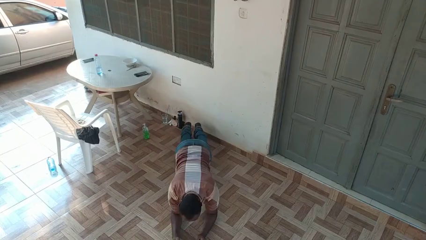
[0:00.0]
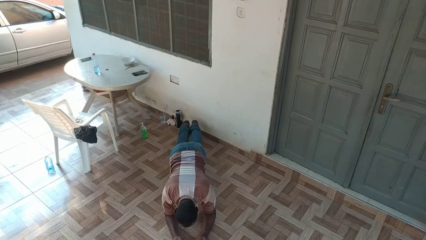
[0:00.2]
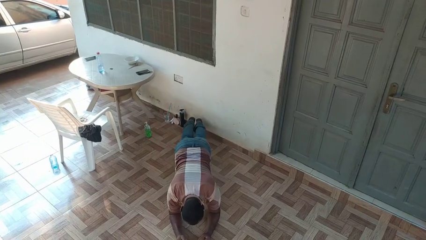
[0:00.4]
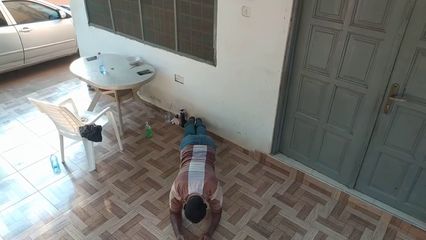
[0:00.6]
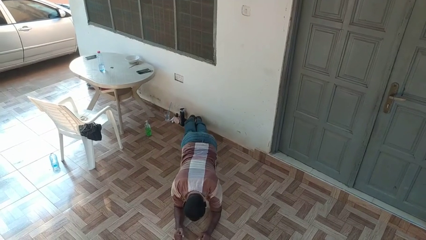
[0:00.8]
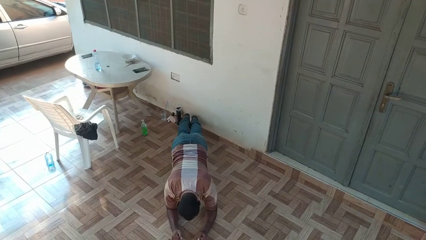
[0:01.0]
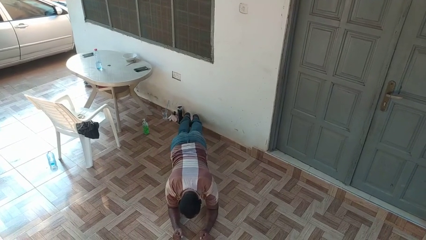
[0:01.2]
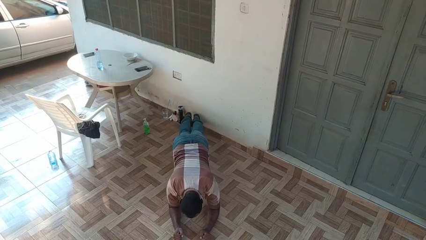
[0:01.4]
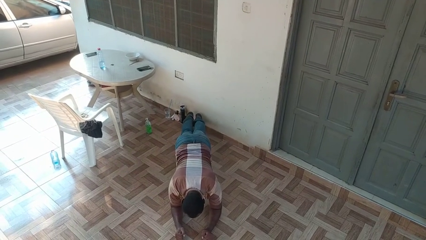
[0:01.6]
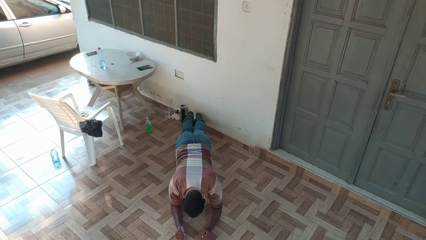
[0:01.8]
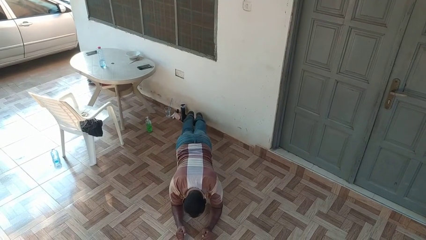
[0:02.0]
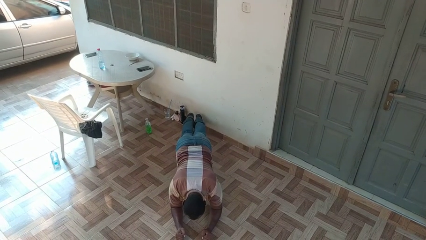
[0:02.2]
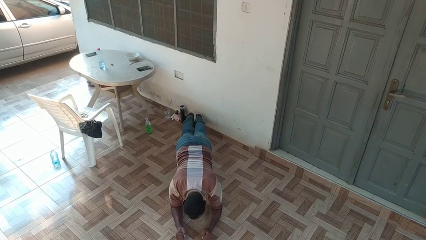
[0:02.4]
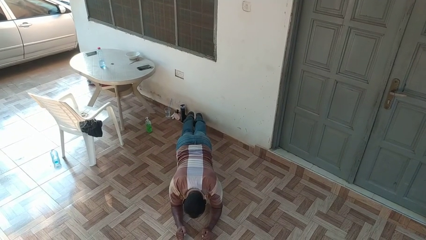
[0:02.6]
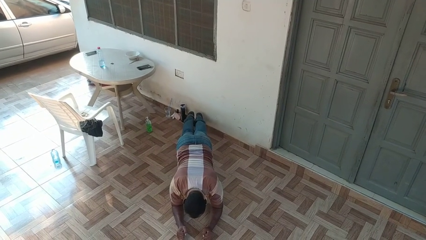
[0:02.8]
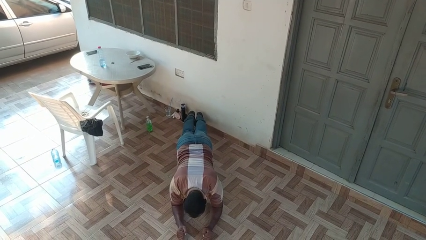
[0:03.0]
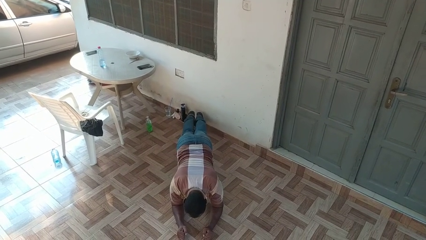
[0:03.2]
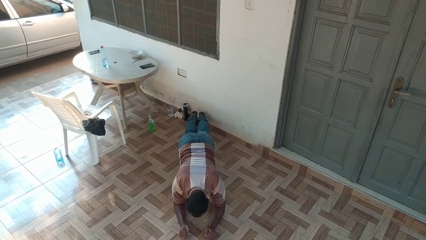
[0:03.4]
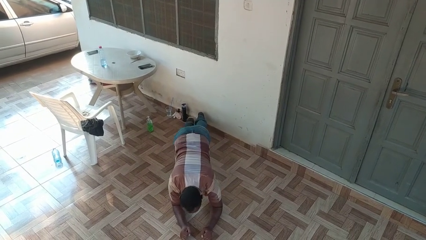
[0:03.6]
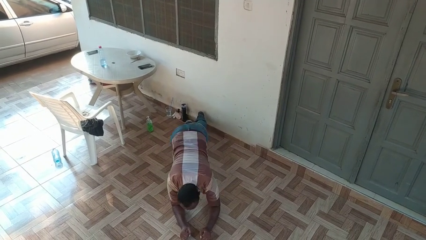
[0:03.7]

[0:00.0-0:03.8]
person exercises with plank

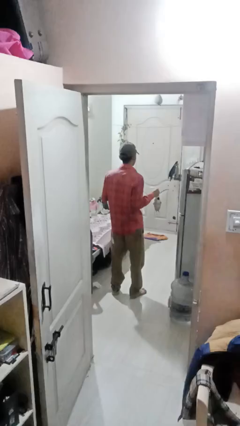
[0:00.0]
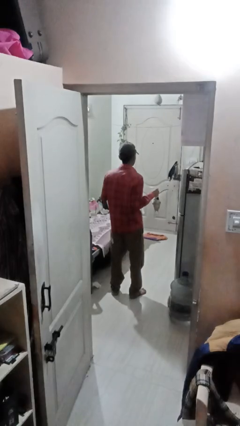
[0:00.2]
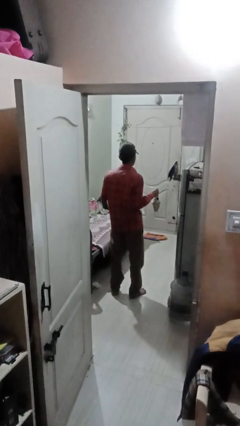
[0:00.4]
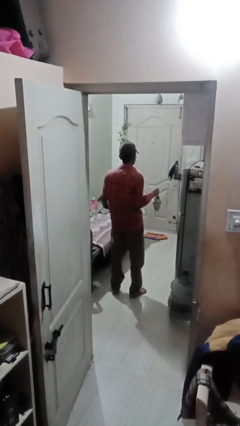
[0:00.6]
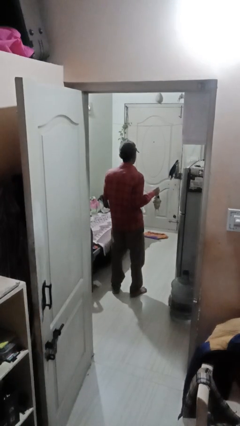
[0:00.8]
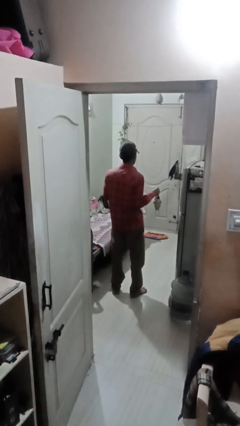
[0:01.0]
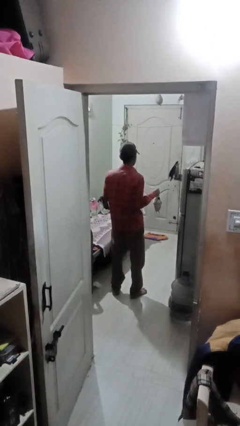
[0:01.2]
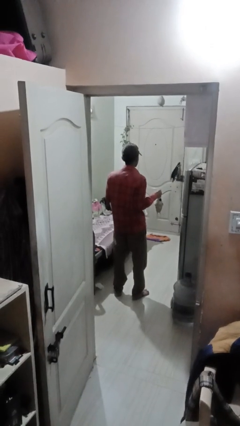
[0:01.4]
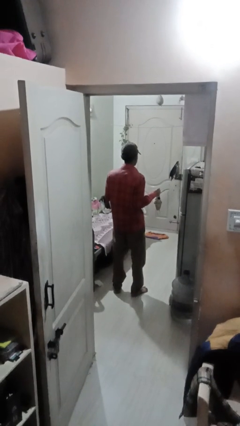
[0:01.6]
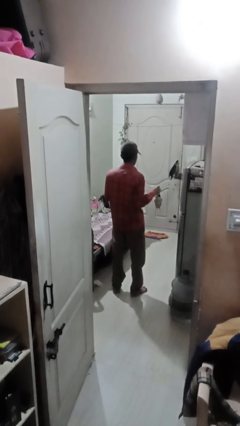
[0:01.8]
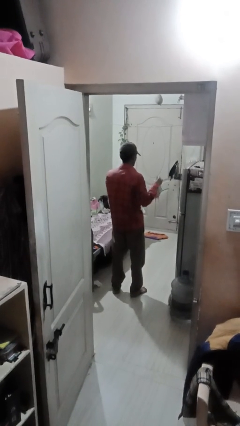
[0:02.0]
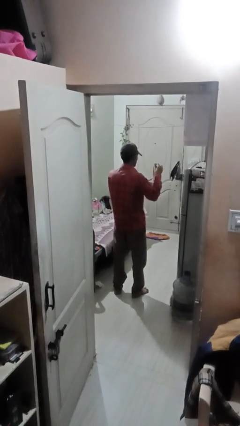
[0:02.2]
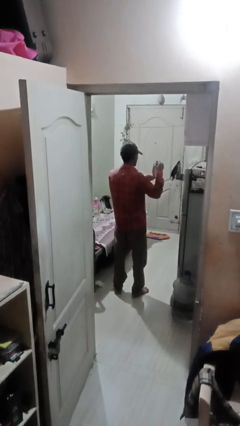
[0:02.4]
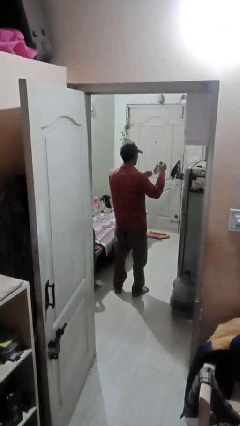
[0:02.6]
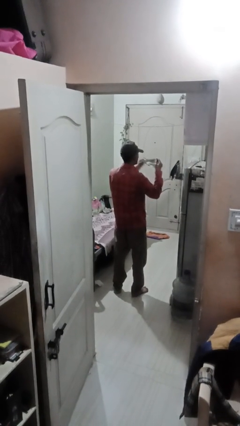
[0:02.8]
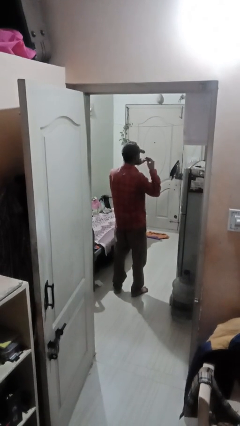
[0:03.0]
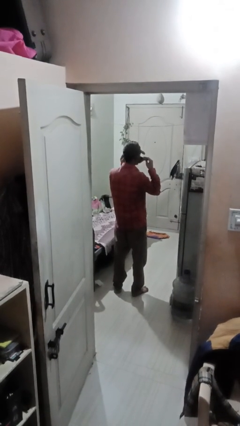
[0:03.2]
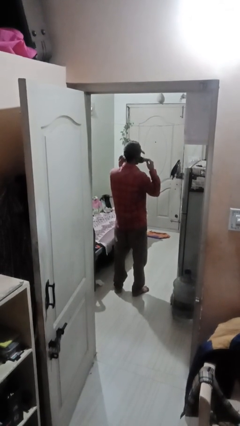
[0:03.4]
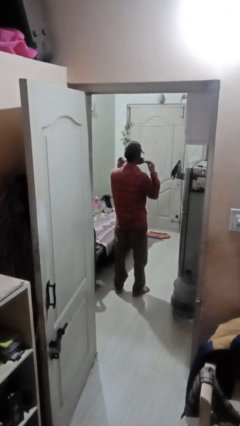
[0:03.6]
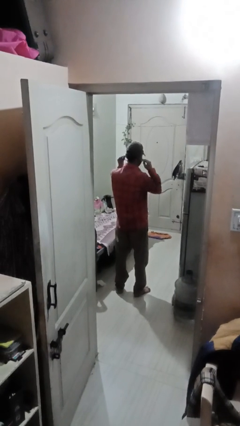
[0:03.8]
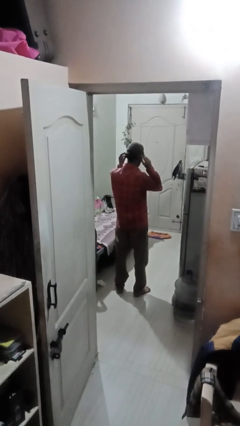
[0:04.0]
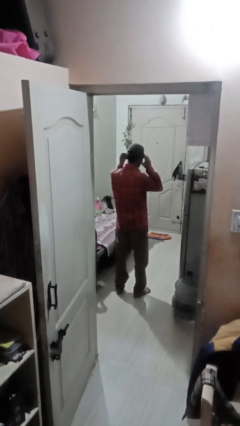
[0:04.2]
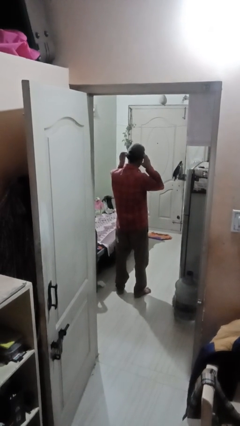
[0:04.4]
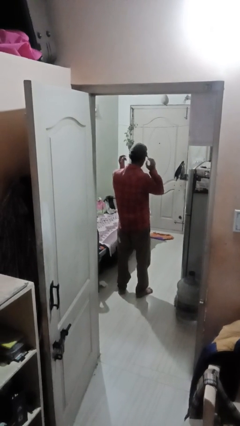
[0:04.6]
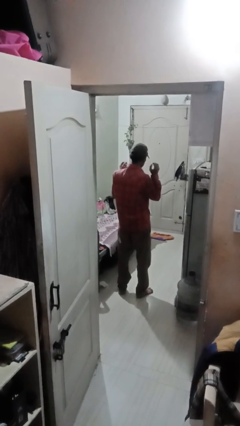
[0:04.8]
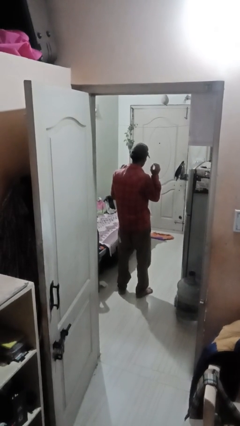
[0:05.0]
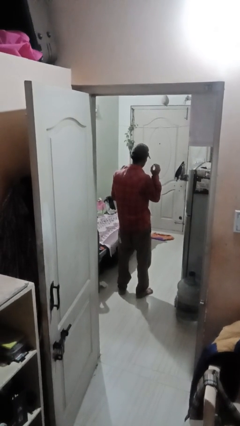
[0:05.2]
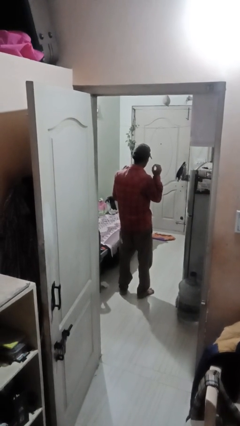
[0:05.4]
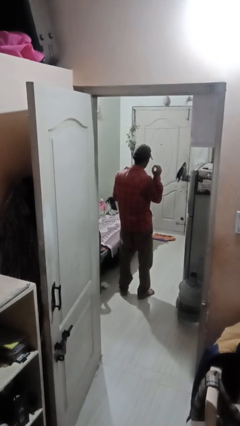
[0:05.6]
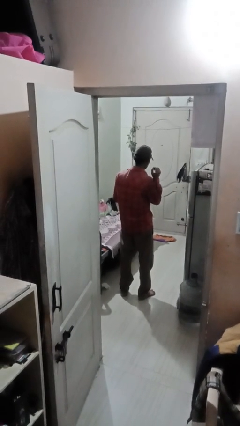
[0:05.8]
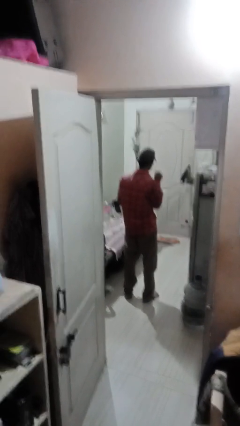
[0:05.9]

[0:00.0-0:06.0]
person puts on facemask

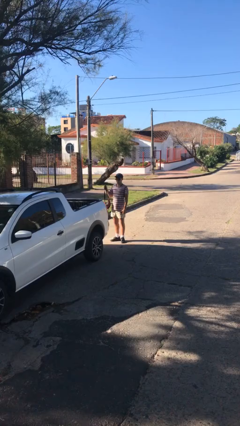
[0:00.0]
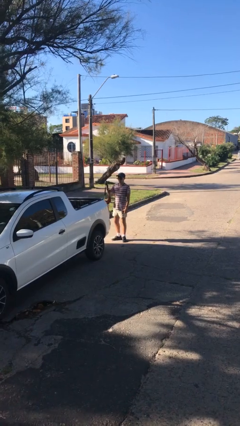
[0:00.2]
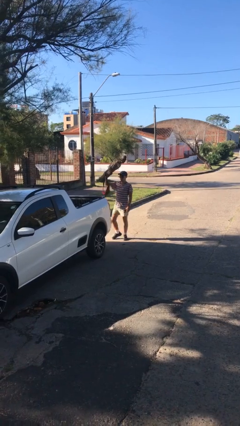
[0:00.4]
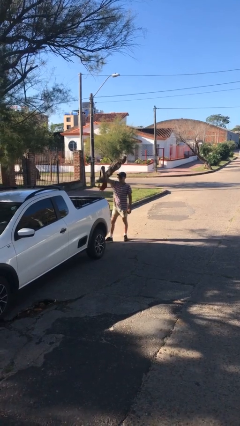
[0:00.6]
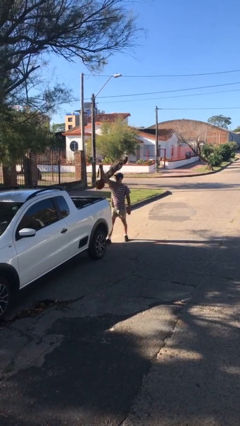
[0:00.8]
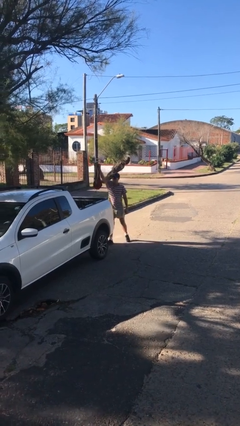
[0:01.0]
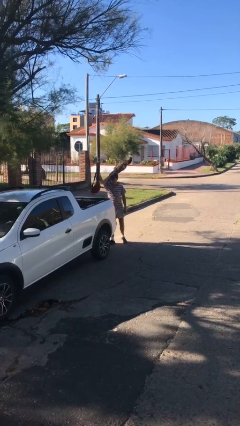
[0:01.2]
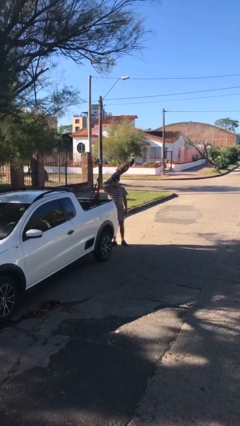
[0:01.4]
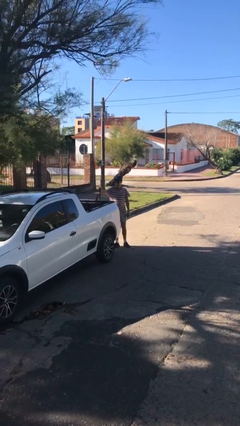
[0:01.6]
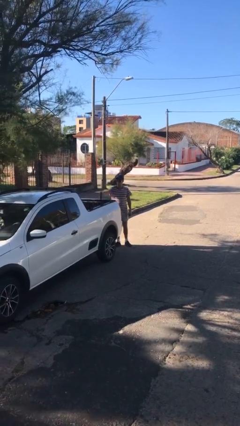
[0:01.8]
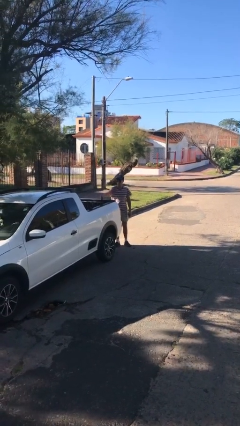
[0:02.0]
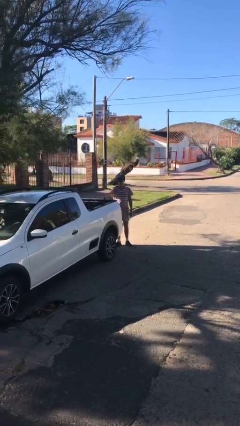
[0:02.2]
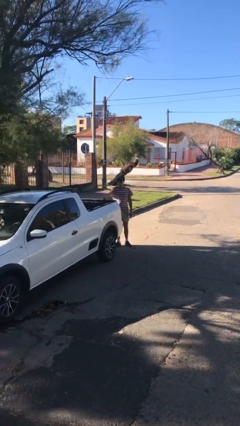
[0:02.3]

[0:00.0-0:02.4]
person loads car

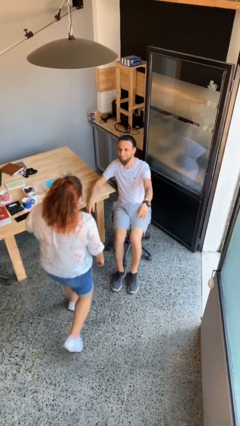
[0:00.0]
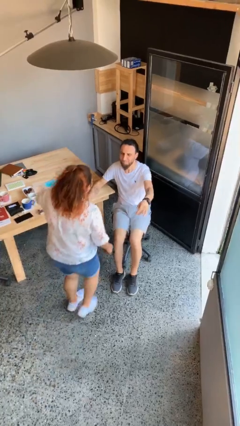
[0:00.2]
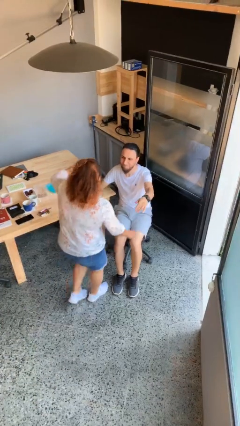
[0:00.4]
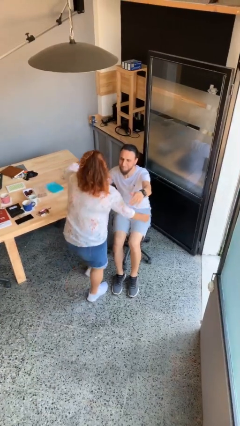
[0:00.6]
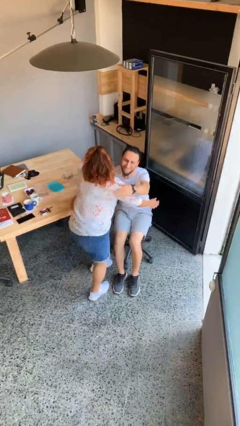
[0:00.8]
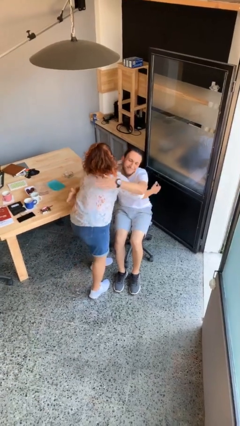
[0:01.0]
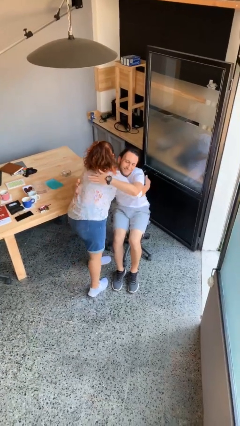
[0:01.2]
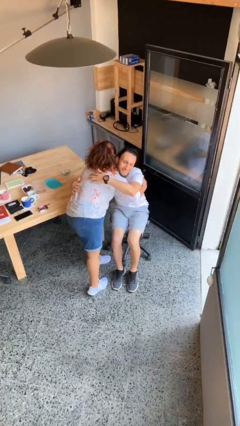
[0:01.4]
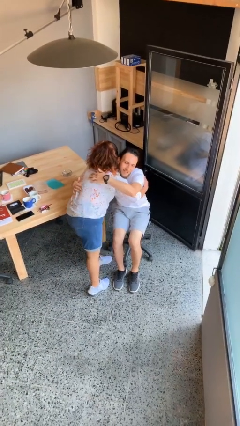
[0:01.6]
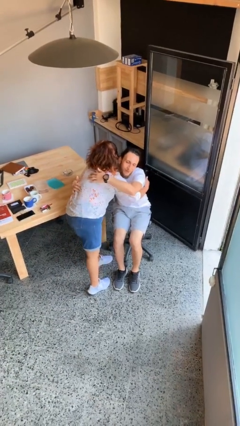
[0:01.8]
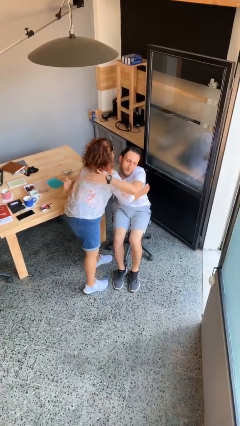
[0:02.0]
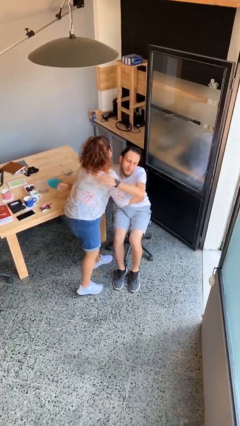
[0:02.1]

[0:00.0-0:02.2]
person embraces person

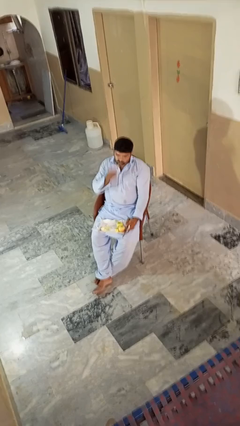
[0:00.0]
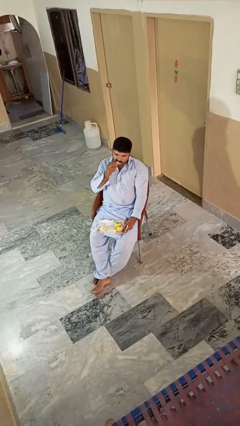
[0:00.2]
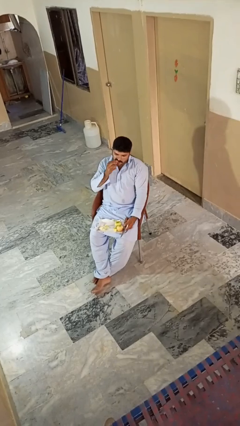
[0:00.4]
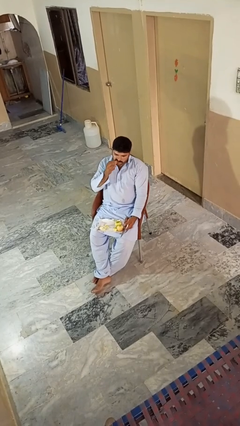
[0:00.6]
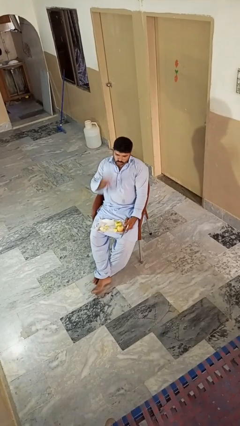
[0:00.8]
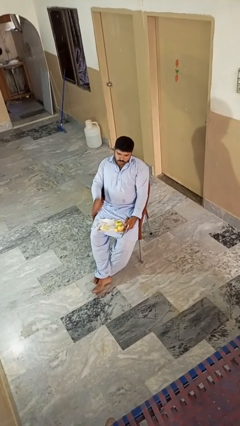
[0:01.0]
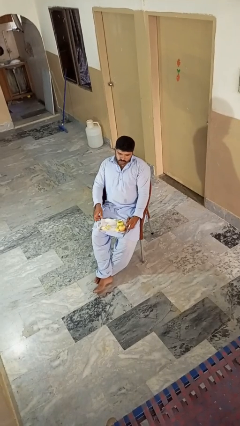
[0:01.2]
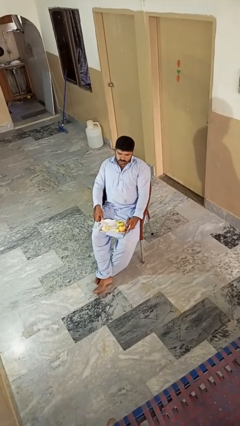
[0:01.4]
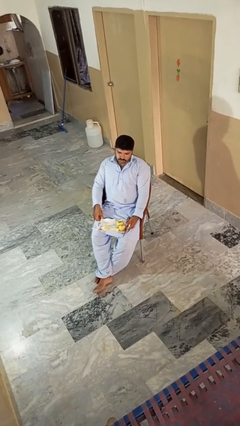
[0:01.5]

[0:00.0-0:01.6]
person eats apple

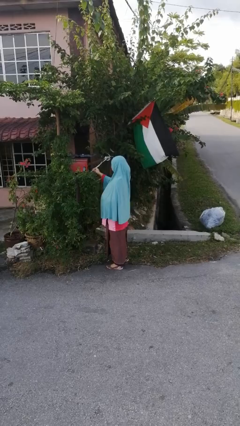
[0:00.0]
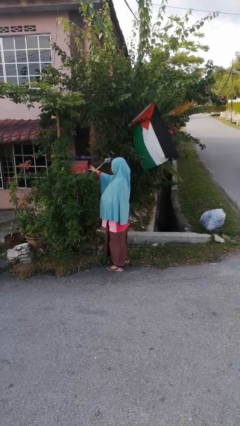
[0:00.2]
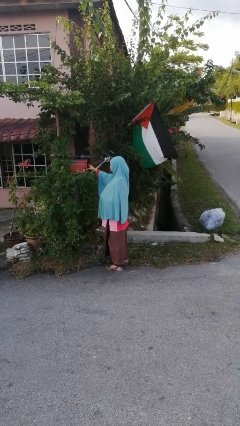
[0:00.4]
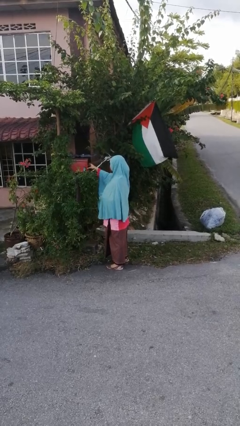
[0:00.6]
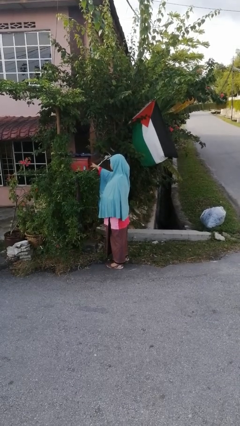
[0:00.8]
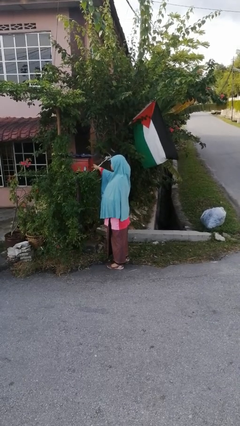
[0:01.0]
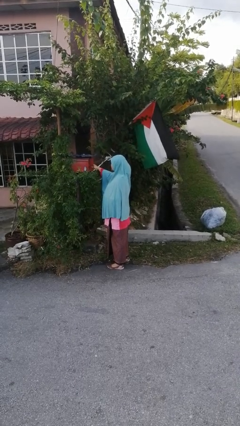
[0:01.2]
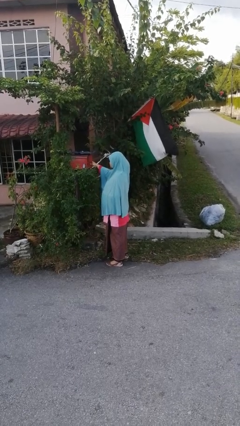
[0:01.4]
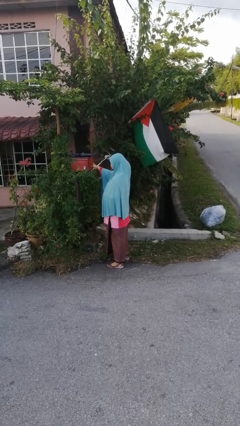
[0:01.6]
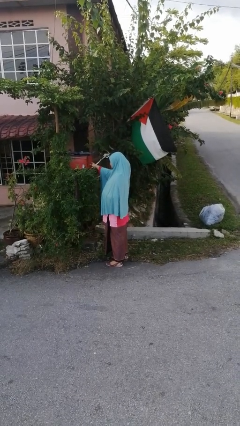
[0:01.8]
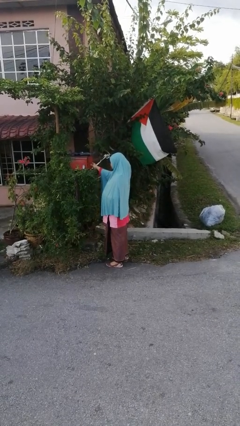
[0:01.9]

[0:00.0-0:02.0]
person opens mailbox
